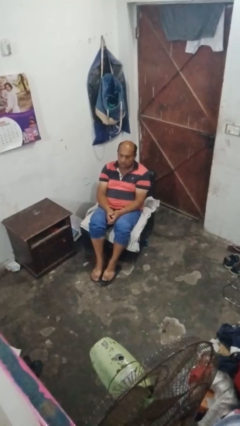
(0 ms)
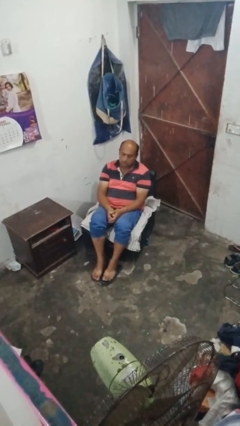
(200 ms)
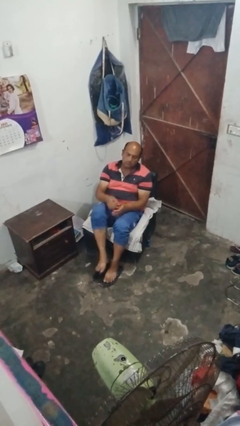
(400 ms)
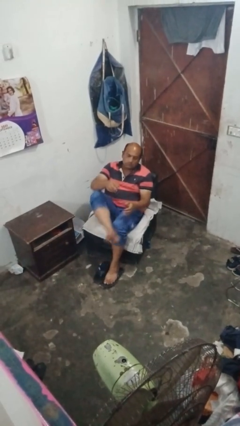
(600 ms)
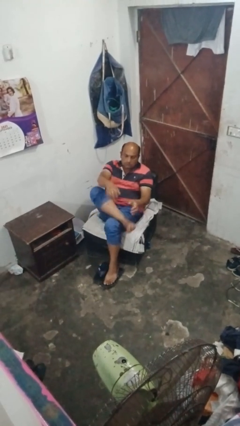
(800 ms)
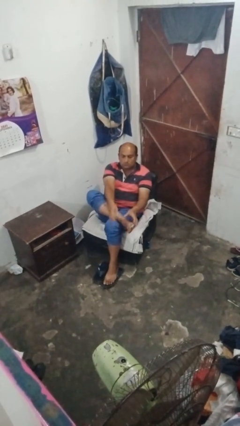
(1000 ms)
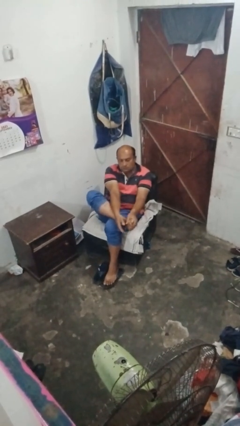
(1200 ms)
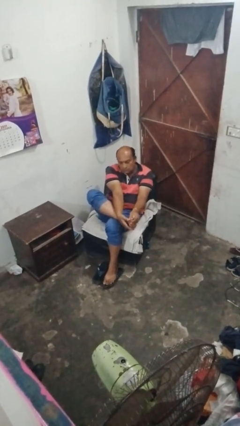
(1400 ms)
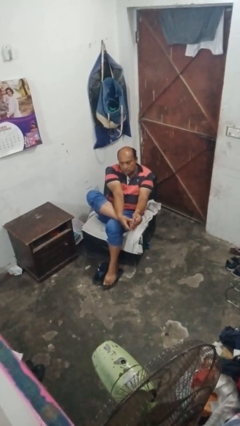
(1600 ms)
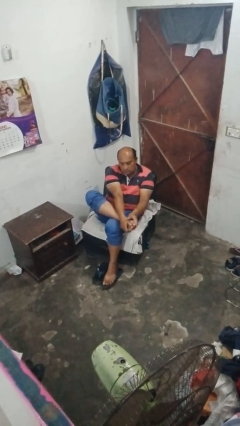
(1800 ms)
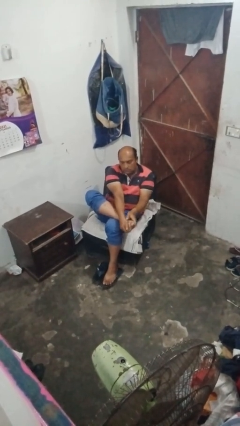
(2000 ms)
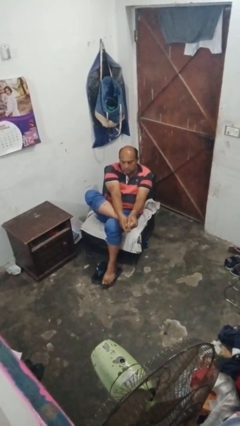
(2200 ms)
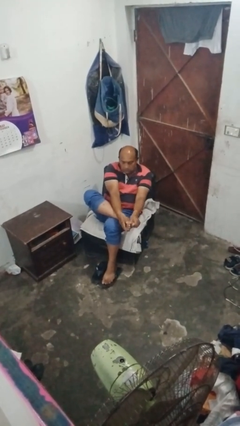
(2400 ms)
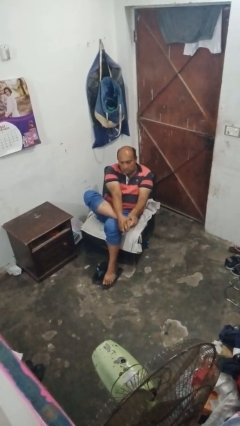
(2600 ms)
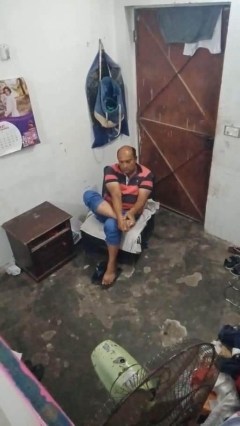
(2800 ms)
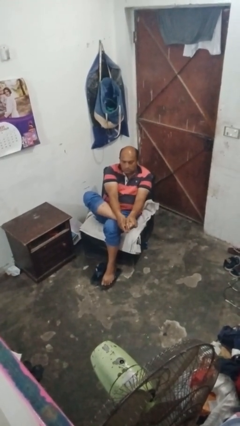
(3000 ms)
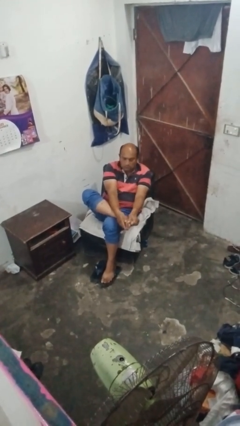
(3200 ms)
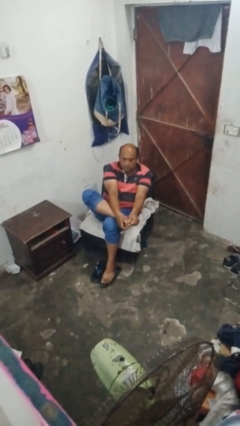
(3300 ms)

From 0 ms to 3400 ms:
person rubs foot

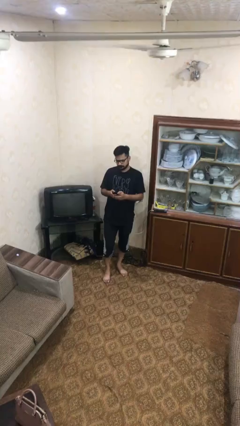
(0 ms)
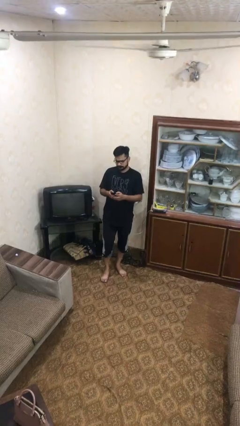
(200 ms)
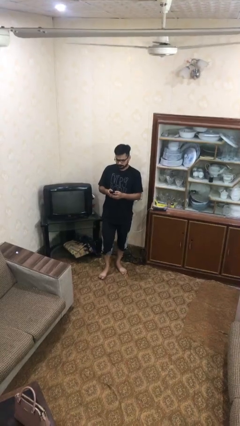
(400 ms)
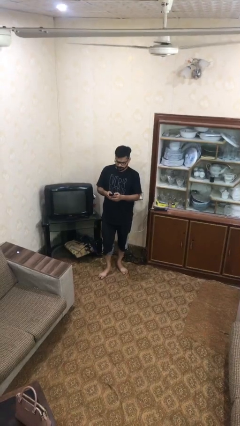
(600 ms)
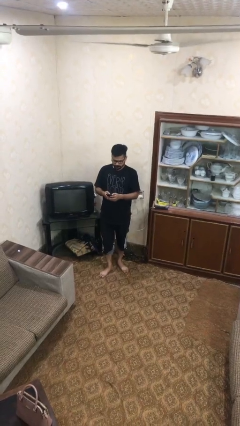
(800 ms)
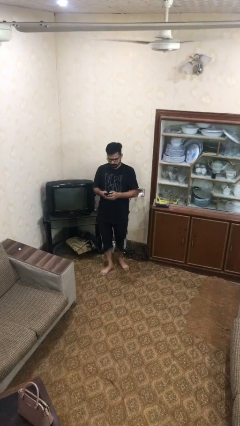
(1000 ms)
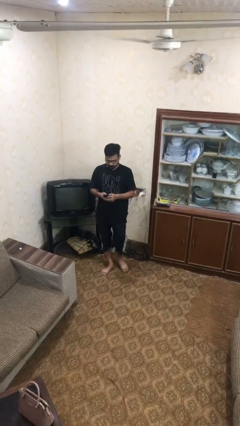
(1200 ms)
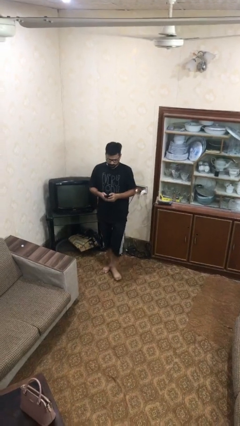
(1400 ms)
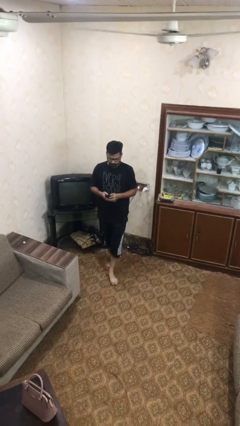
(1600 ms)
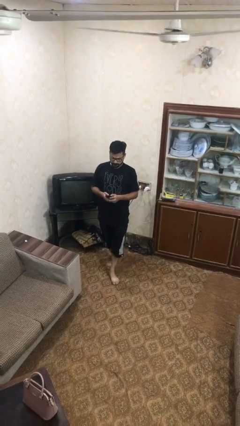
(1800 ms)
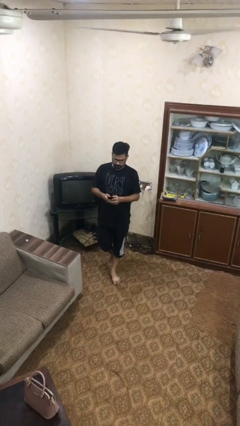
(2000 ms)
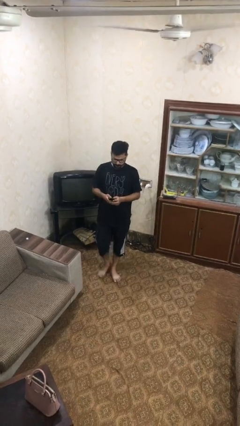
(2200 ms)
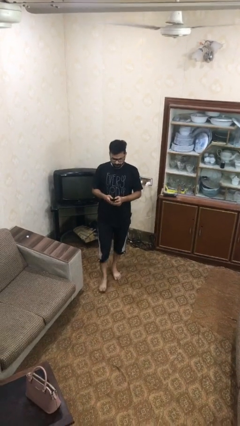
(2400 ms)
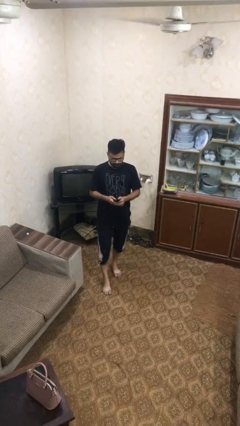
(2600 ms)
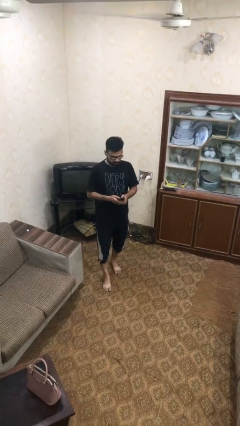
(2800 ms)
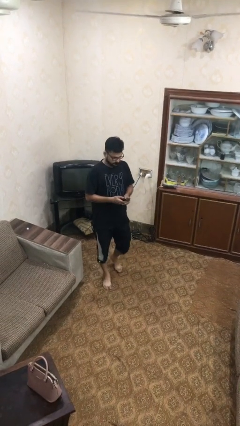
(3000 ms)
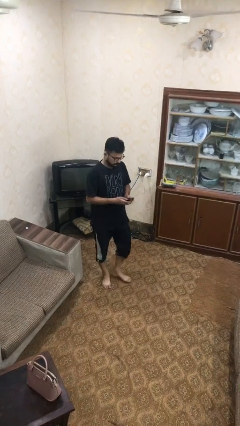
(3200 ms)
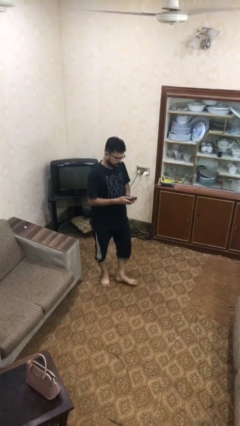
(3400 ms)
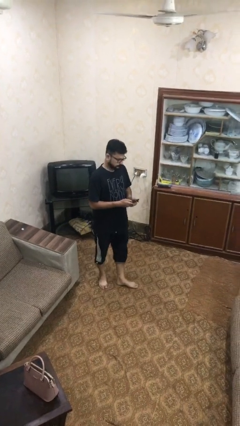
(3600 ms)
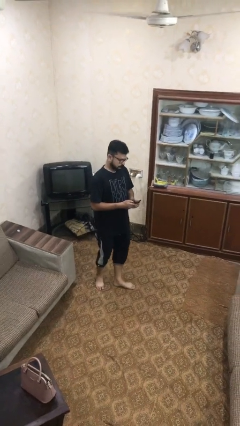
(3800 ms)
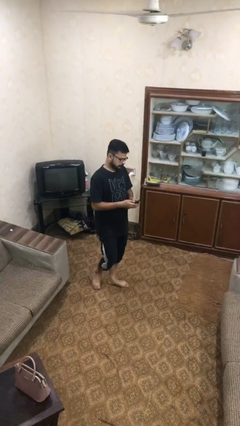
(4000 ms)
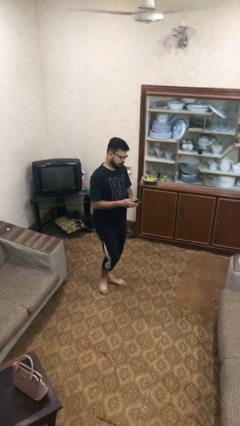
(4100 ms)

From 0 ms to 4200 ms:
person texts on phone

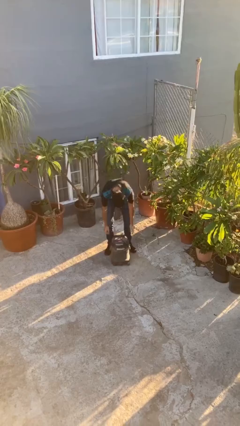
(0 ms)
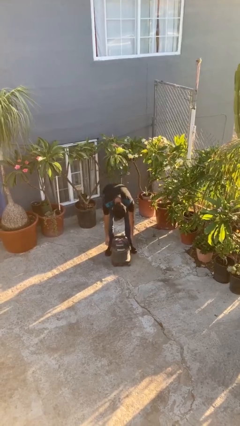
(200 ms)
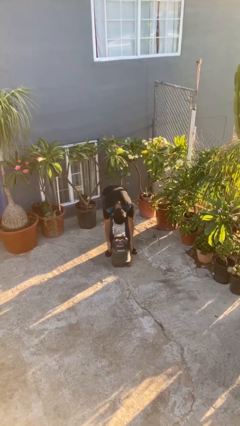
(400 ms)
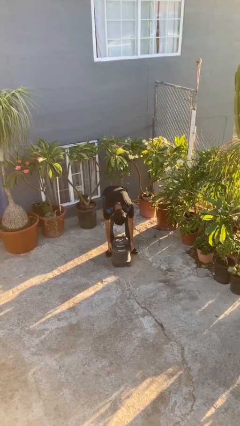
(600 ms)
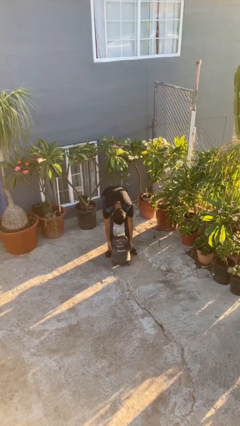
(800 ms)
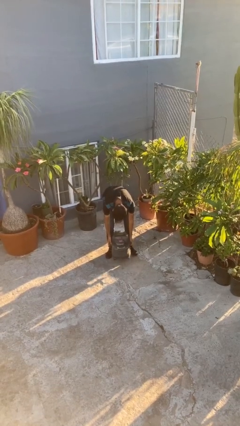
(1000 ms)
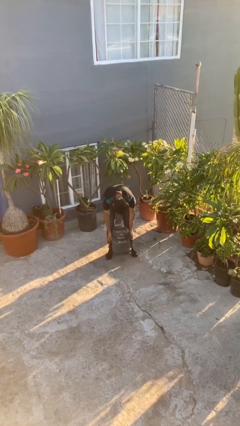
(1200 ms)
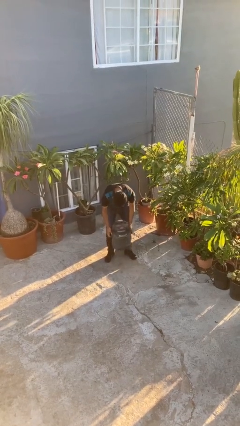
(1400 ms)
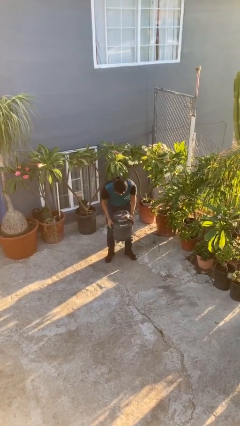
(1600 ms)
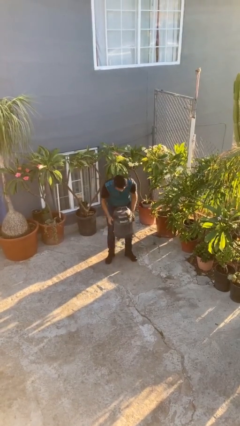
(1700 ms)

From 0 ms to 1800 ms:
person picks up object from floor

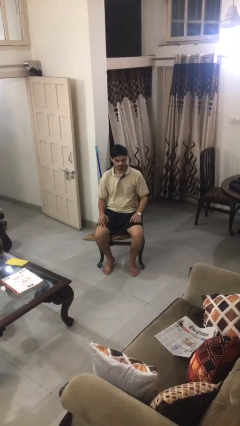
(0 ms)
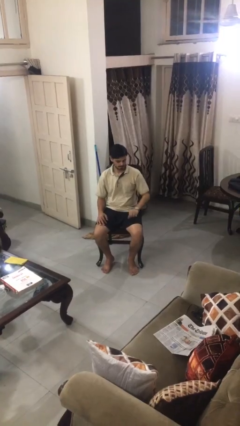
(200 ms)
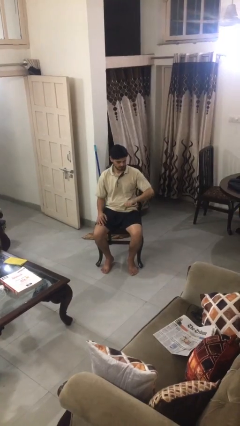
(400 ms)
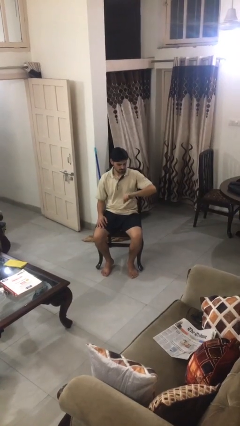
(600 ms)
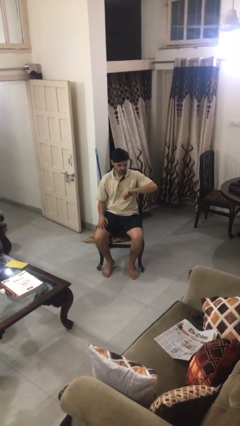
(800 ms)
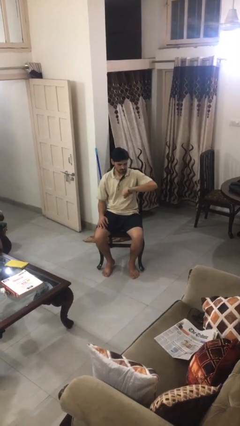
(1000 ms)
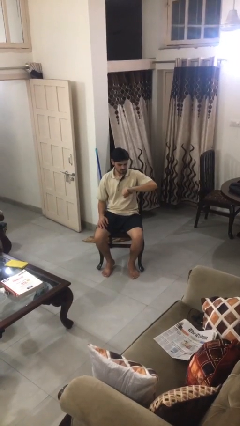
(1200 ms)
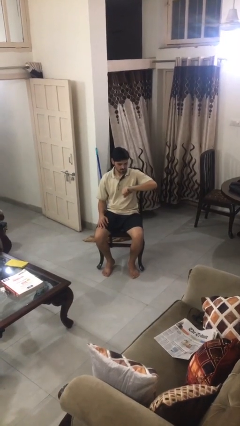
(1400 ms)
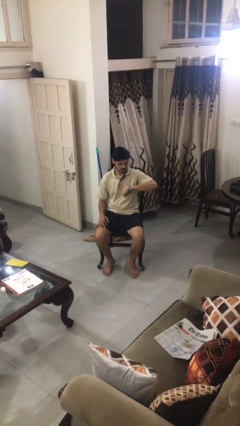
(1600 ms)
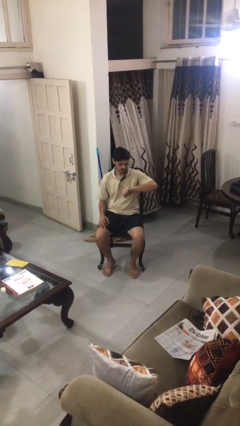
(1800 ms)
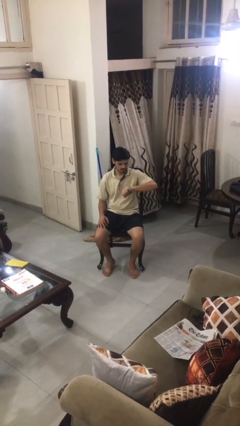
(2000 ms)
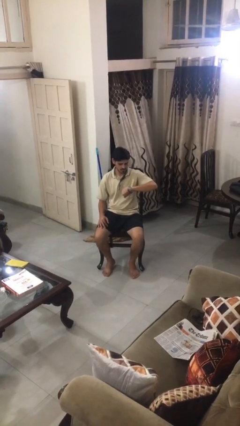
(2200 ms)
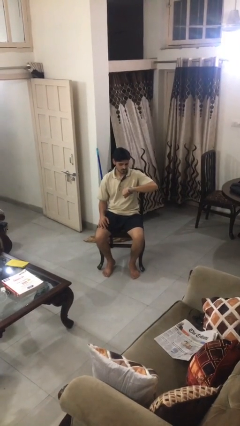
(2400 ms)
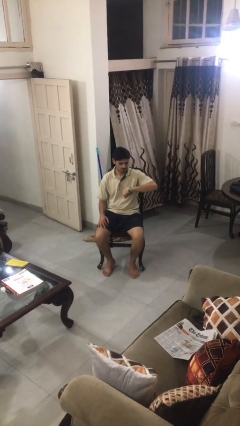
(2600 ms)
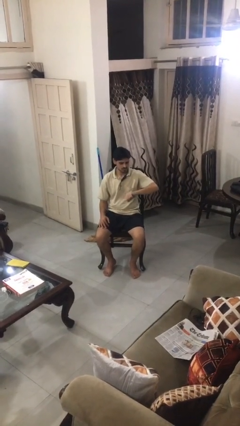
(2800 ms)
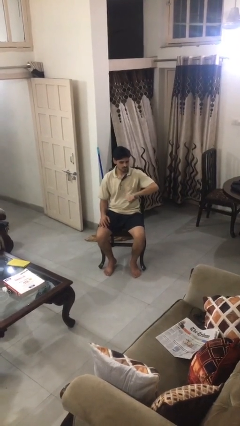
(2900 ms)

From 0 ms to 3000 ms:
person looks at wristwatch

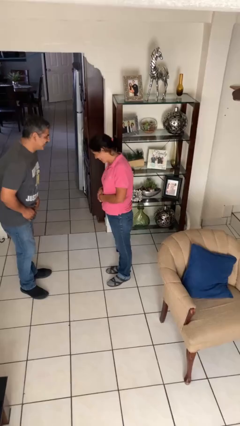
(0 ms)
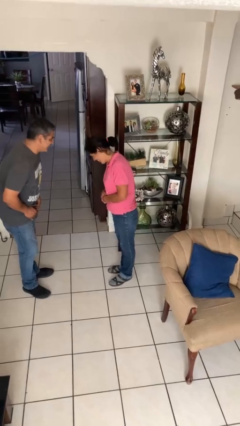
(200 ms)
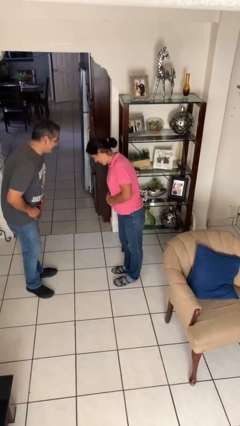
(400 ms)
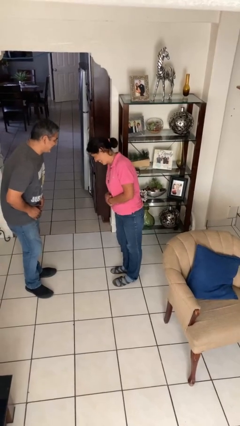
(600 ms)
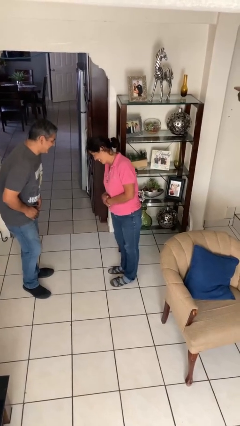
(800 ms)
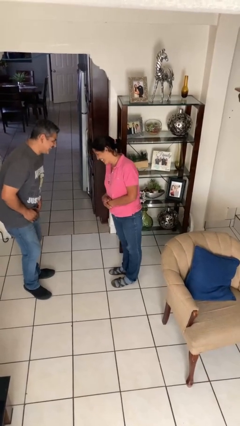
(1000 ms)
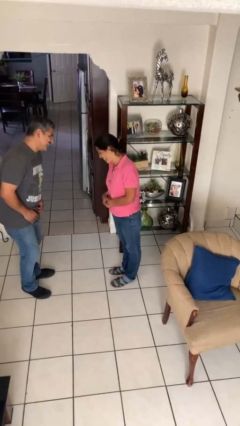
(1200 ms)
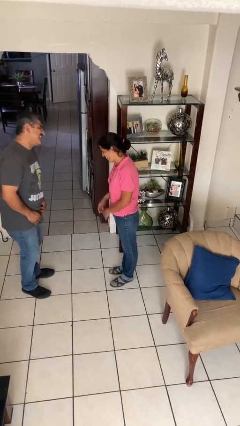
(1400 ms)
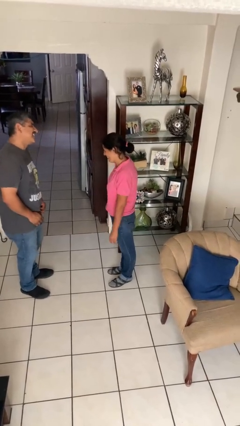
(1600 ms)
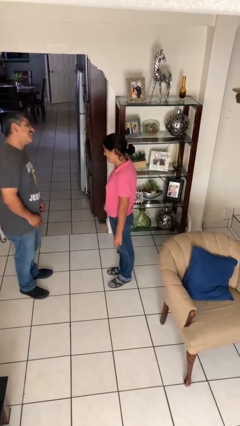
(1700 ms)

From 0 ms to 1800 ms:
person laughs with person

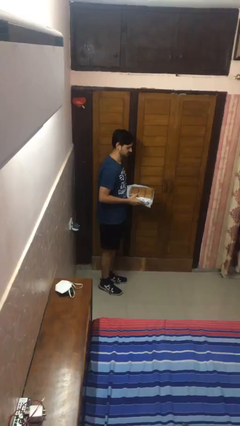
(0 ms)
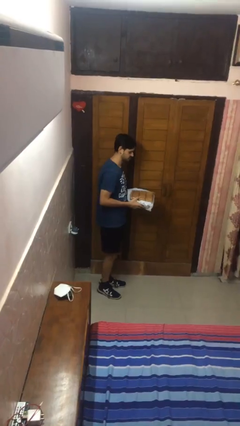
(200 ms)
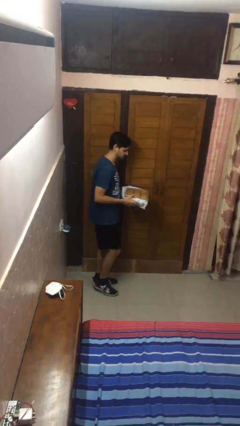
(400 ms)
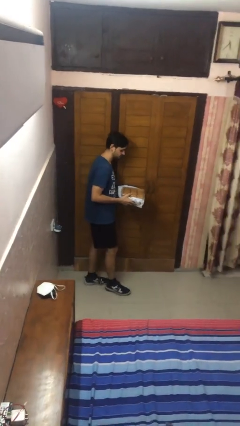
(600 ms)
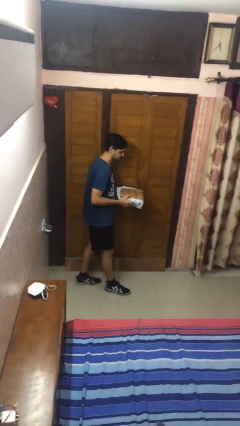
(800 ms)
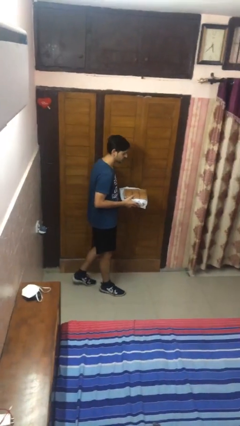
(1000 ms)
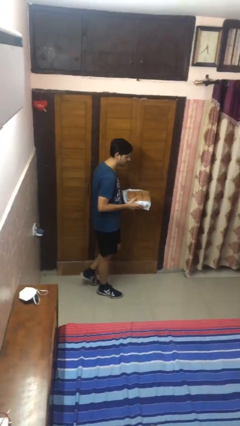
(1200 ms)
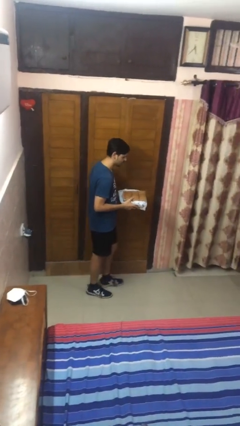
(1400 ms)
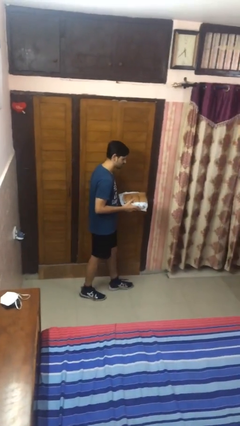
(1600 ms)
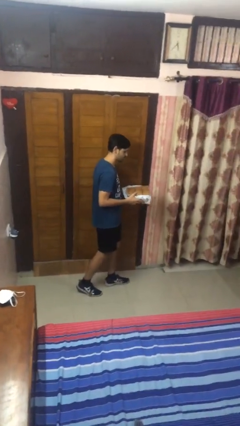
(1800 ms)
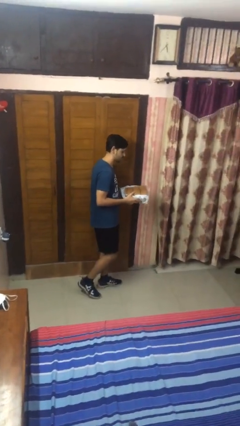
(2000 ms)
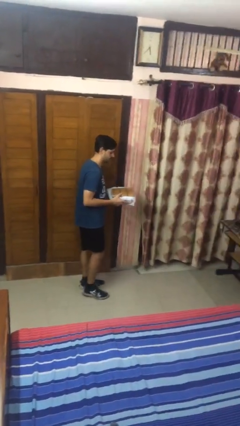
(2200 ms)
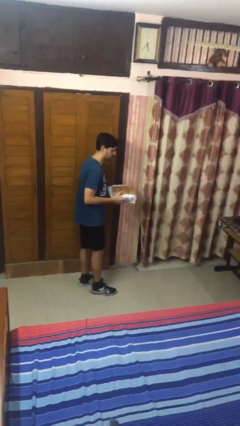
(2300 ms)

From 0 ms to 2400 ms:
person carries groceries

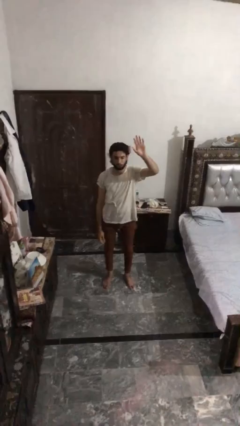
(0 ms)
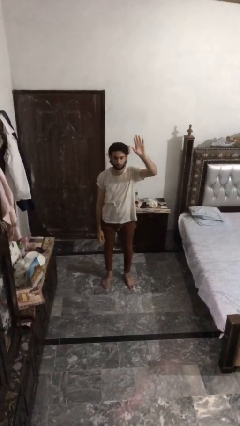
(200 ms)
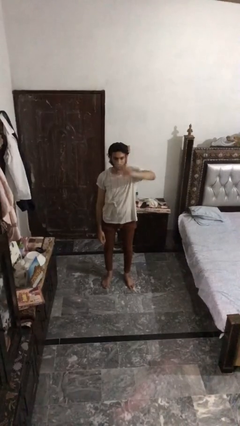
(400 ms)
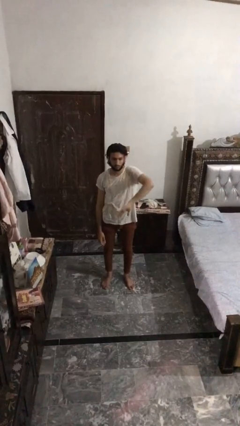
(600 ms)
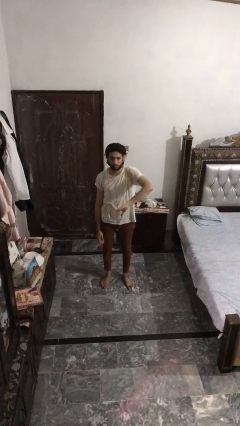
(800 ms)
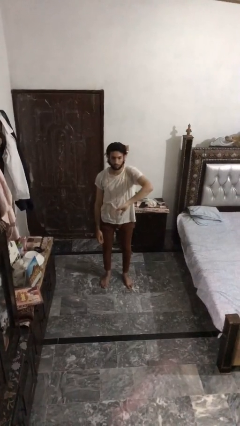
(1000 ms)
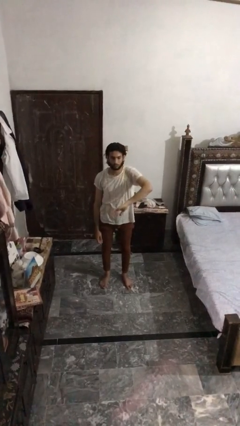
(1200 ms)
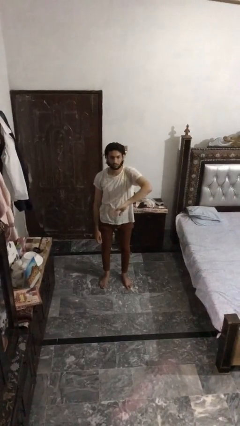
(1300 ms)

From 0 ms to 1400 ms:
person gestures swipe down
